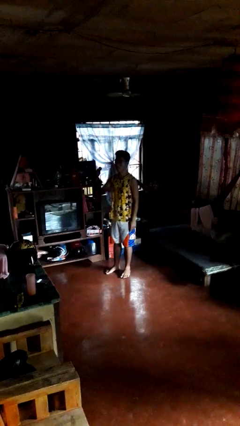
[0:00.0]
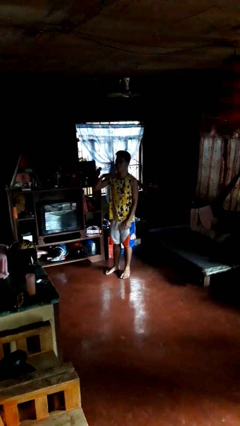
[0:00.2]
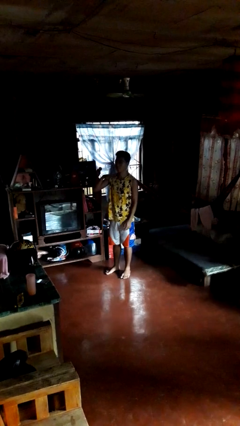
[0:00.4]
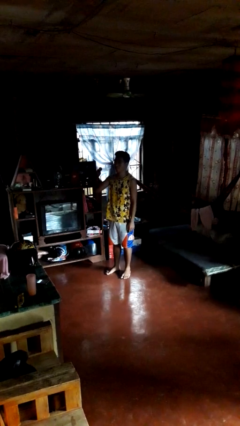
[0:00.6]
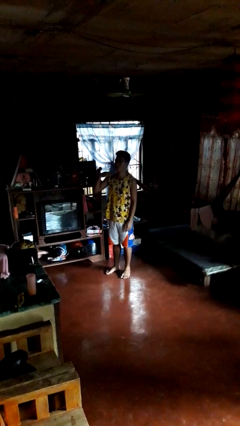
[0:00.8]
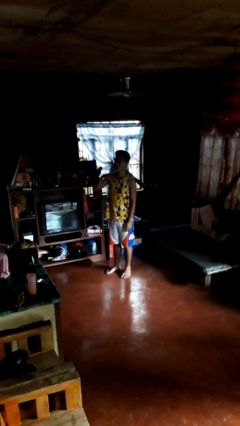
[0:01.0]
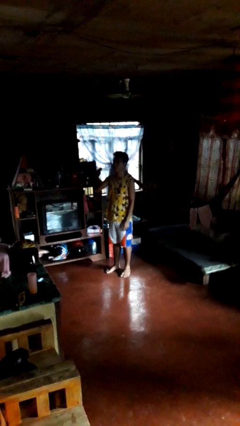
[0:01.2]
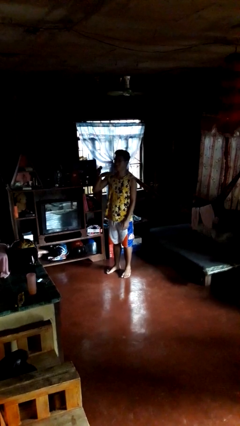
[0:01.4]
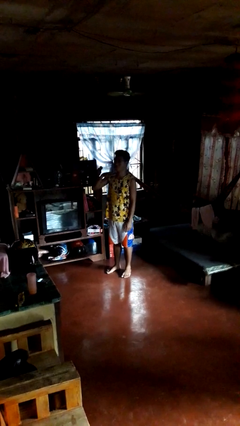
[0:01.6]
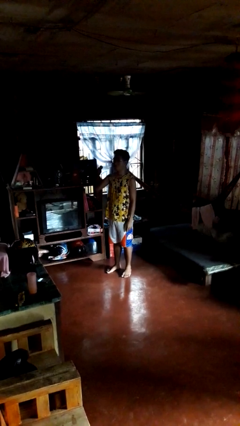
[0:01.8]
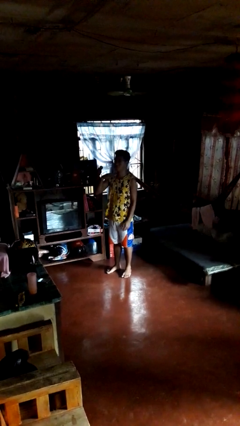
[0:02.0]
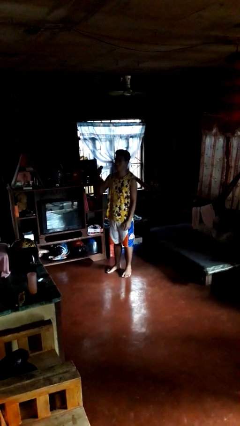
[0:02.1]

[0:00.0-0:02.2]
person gestures cut

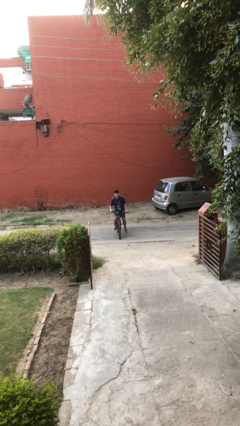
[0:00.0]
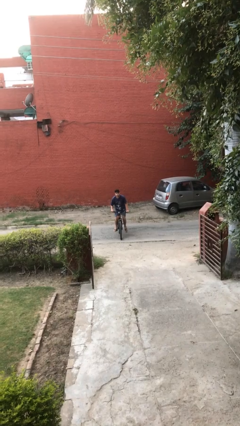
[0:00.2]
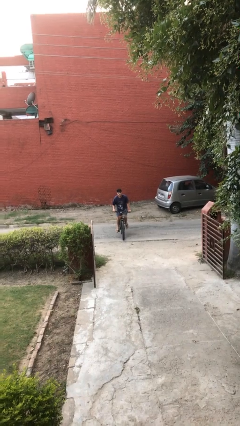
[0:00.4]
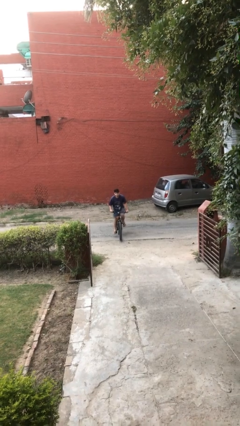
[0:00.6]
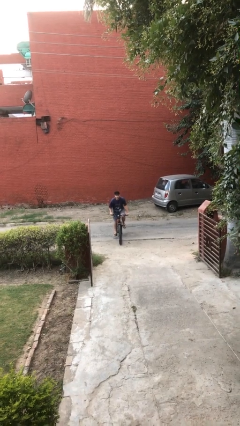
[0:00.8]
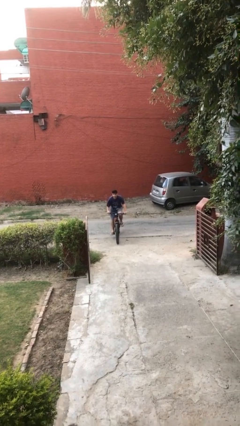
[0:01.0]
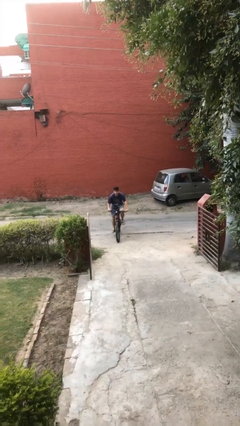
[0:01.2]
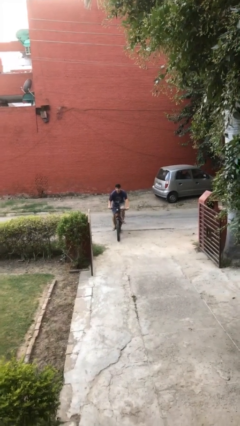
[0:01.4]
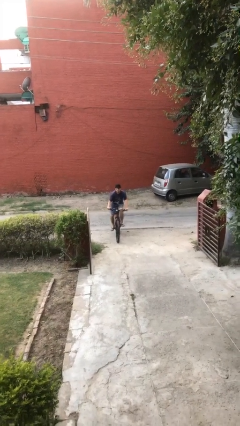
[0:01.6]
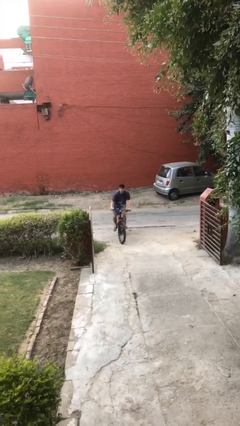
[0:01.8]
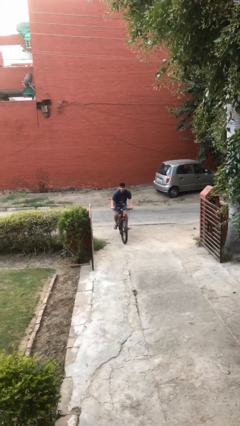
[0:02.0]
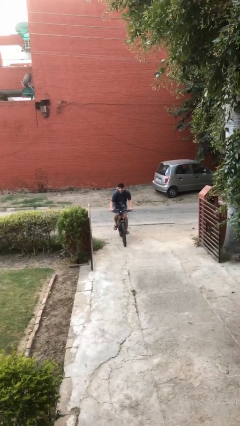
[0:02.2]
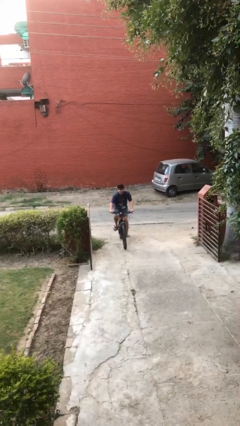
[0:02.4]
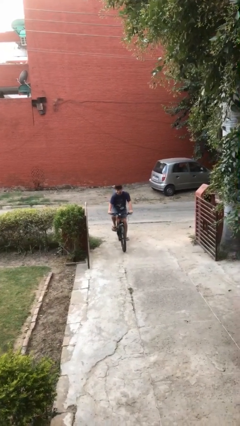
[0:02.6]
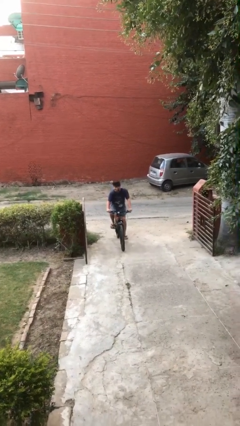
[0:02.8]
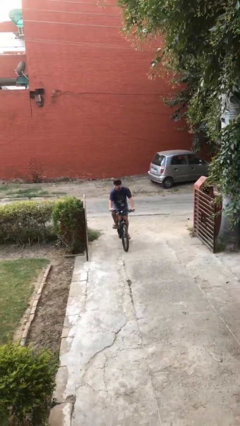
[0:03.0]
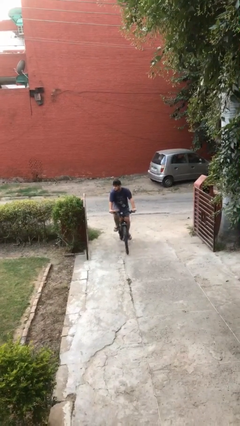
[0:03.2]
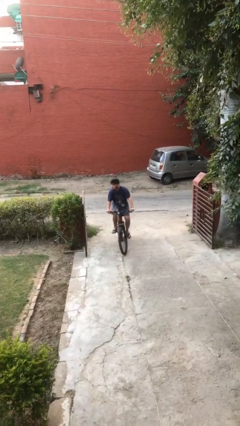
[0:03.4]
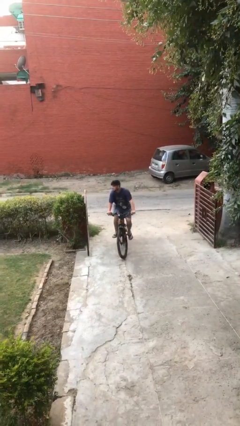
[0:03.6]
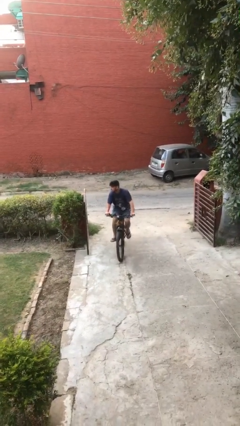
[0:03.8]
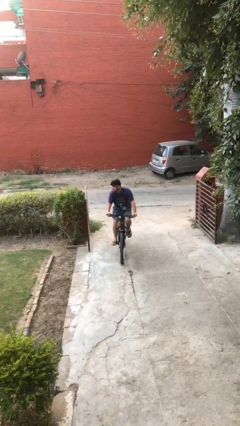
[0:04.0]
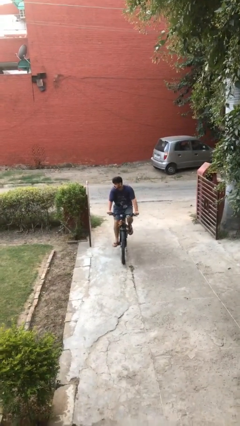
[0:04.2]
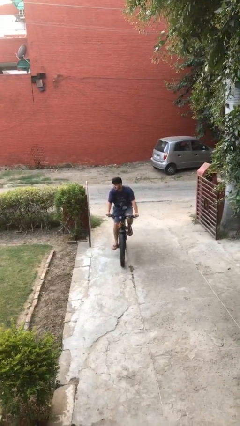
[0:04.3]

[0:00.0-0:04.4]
person rides bicycle

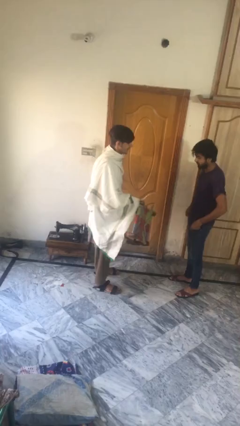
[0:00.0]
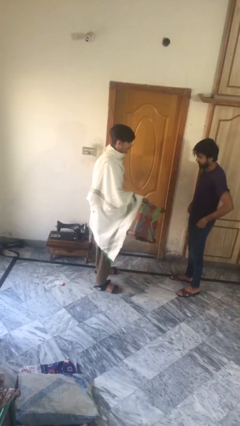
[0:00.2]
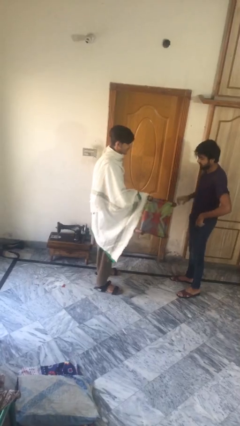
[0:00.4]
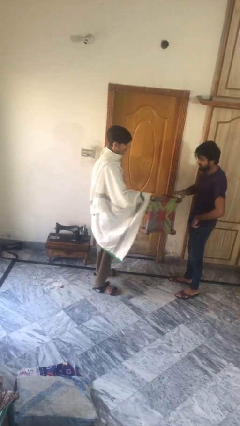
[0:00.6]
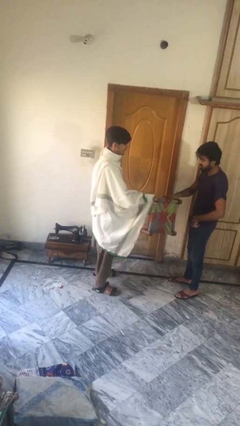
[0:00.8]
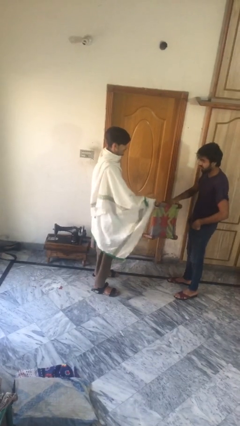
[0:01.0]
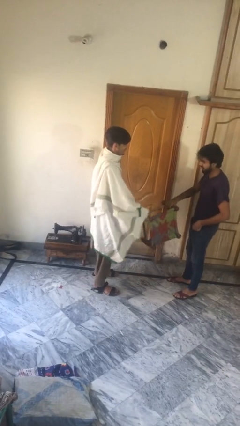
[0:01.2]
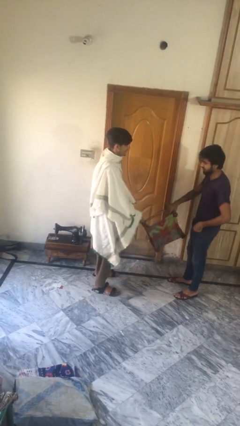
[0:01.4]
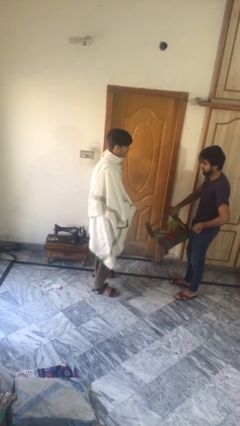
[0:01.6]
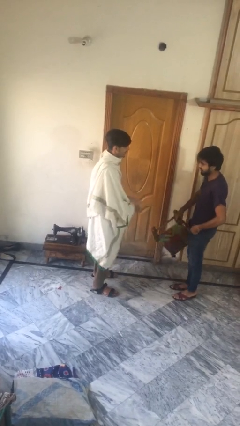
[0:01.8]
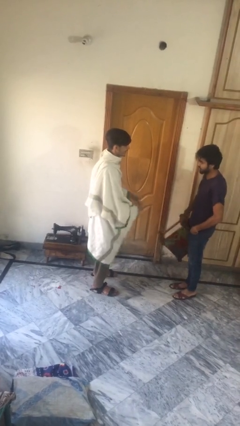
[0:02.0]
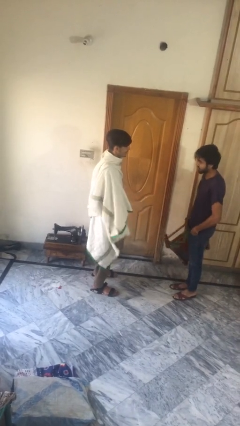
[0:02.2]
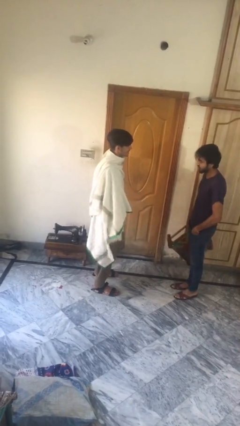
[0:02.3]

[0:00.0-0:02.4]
person transfers object to person

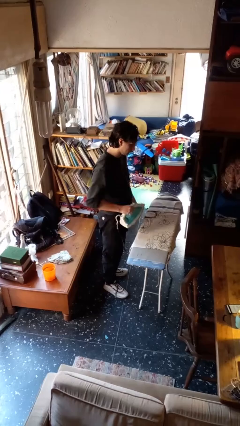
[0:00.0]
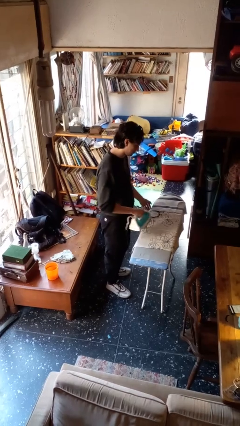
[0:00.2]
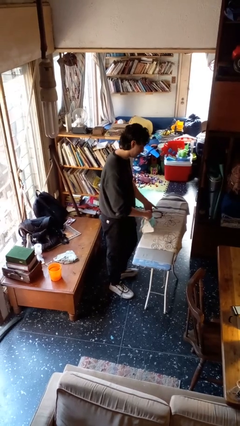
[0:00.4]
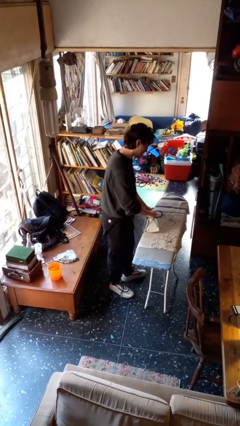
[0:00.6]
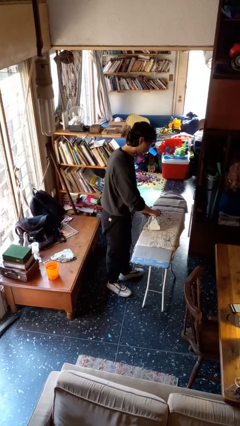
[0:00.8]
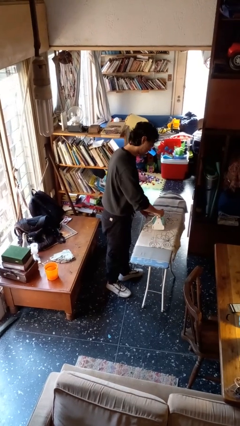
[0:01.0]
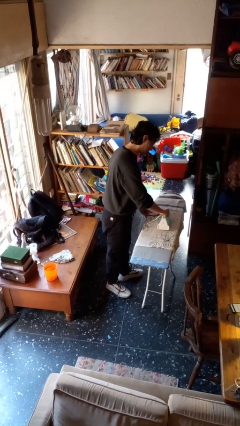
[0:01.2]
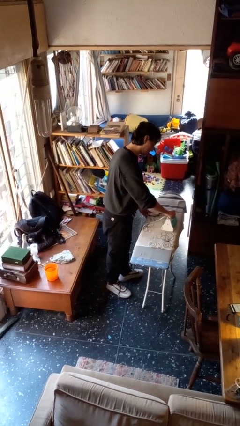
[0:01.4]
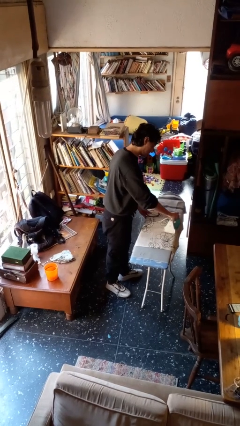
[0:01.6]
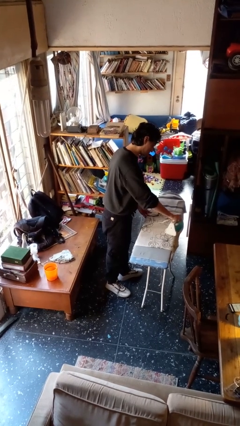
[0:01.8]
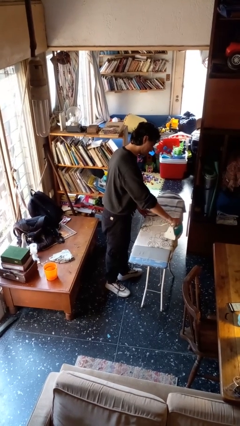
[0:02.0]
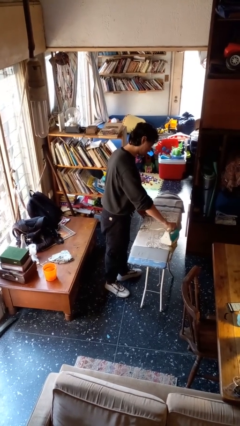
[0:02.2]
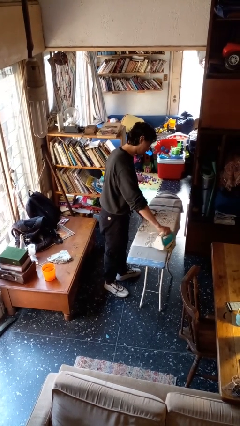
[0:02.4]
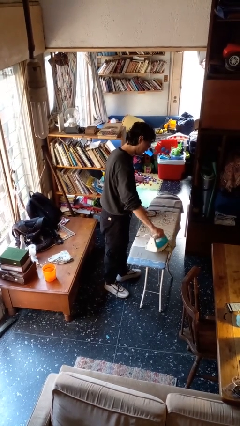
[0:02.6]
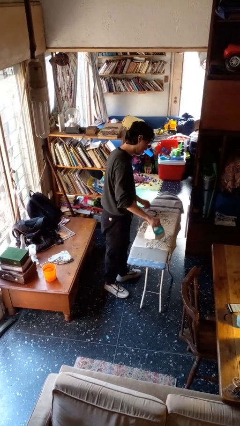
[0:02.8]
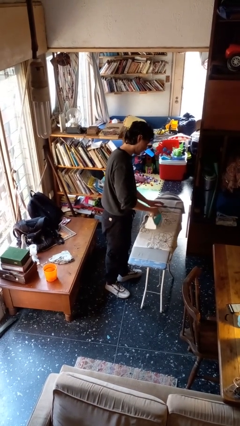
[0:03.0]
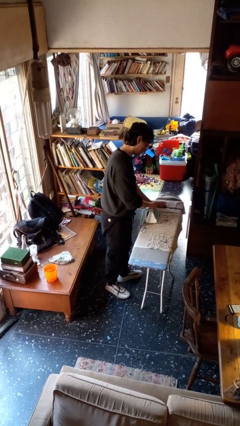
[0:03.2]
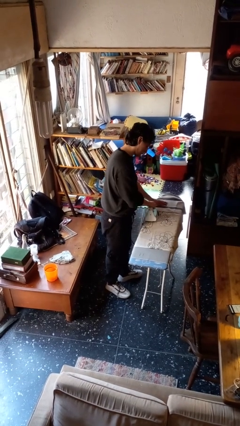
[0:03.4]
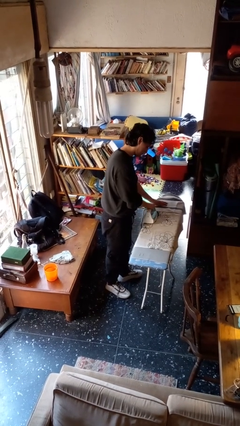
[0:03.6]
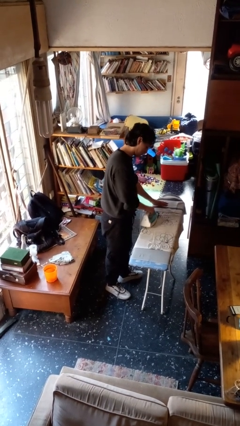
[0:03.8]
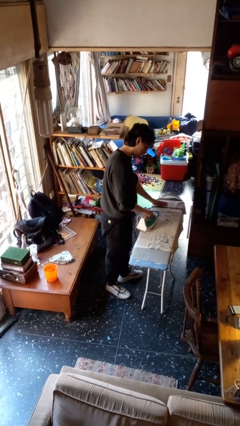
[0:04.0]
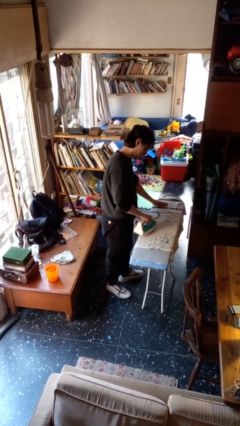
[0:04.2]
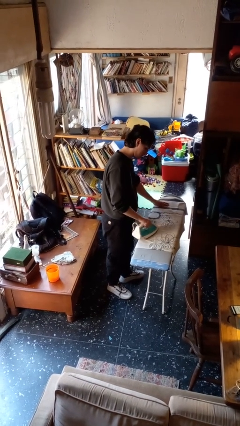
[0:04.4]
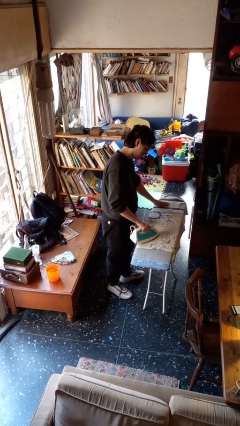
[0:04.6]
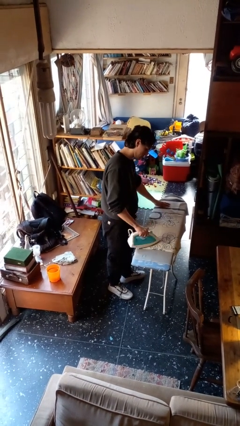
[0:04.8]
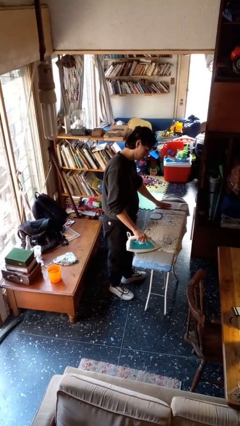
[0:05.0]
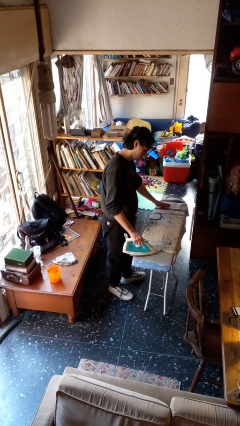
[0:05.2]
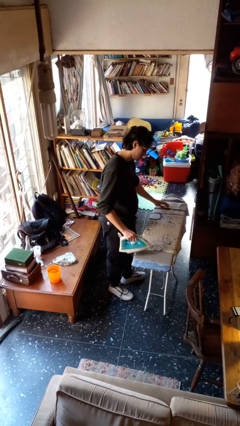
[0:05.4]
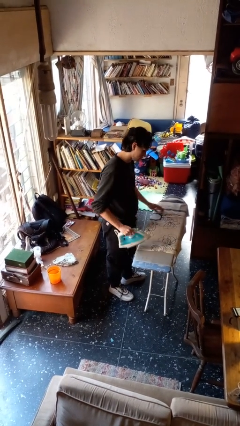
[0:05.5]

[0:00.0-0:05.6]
person irons clothes

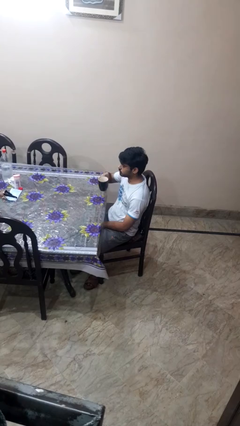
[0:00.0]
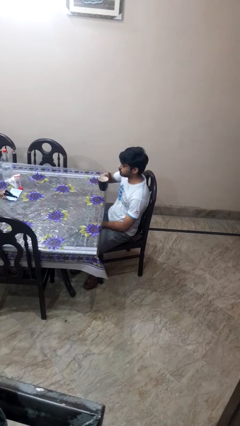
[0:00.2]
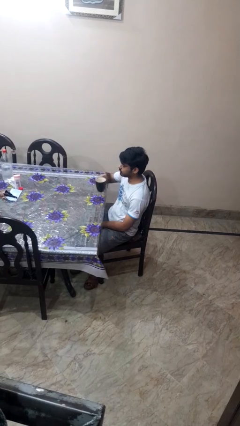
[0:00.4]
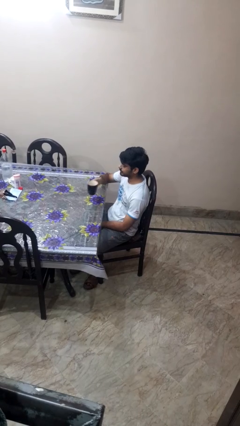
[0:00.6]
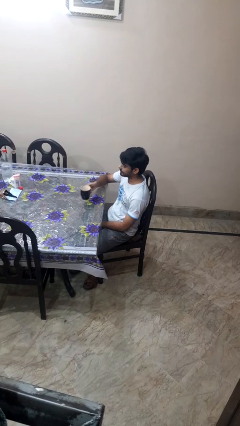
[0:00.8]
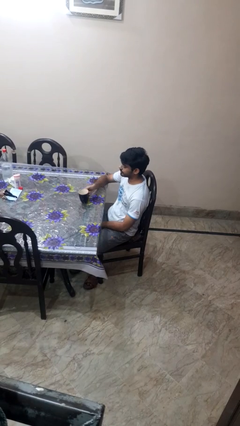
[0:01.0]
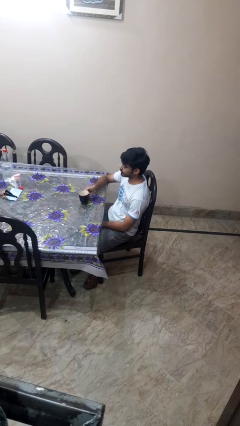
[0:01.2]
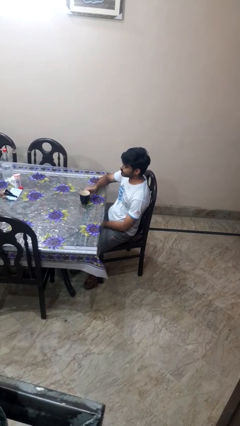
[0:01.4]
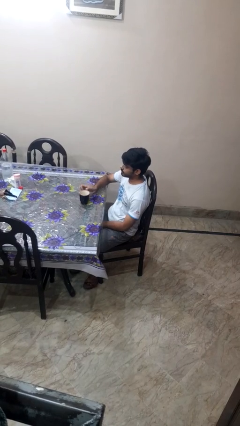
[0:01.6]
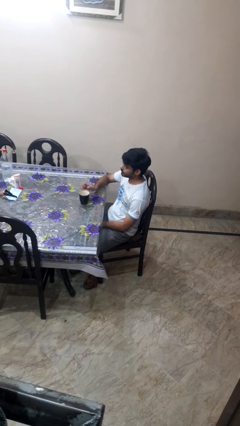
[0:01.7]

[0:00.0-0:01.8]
person puts down object on table

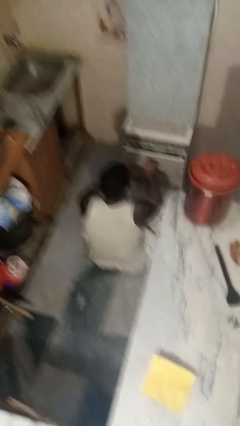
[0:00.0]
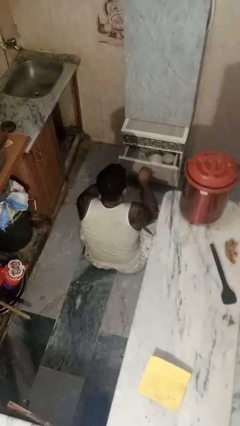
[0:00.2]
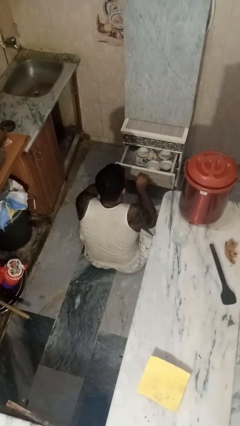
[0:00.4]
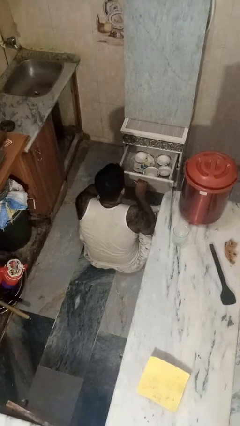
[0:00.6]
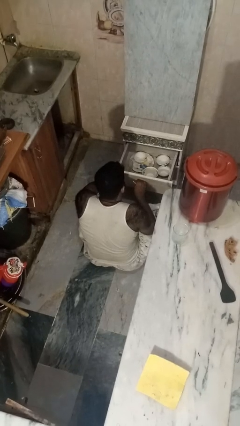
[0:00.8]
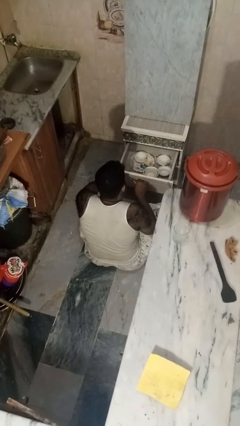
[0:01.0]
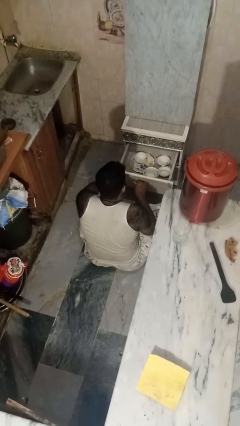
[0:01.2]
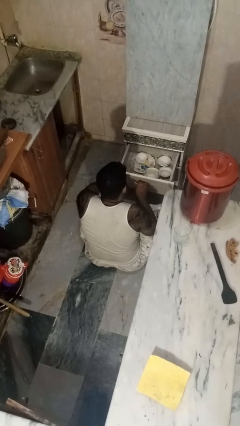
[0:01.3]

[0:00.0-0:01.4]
person opens kitchen drawer
